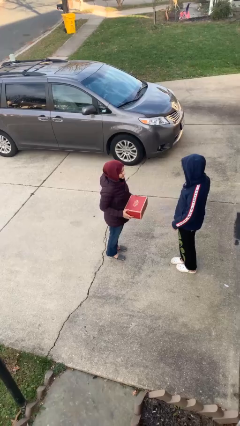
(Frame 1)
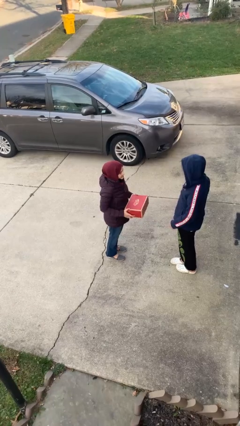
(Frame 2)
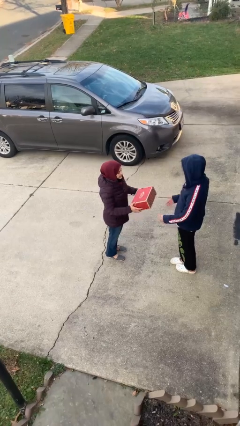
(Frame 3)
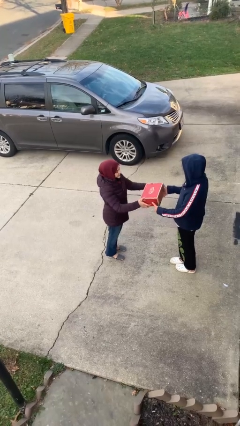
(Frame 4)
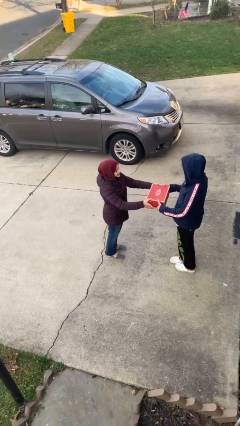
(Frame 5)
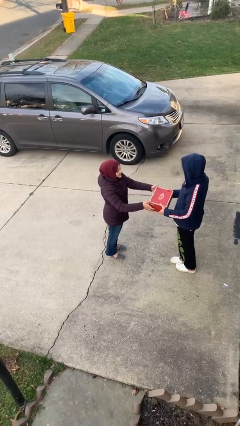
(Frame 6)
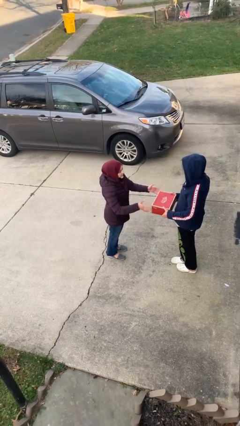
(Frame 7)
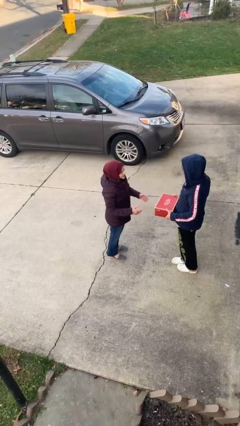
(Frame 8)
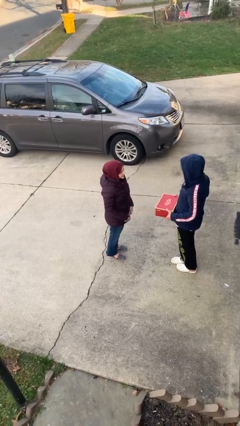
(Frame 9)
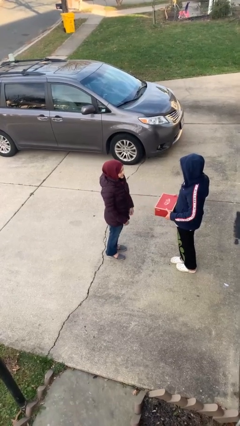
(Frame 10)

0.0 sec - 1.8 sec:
person transfers object to person

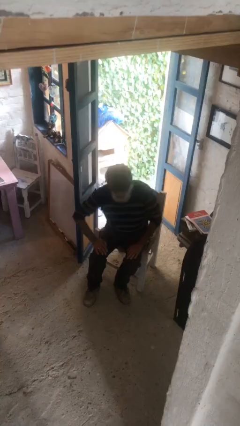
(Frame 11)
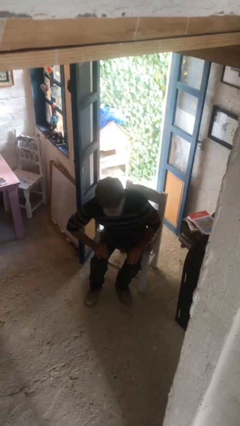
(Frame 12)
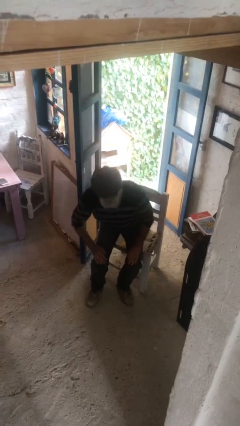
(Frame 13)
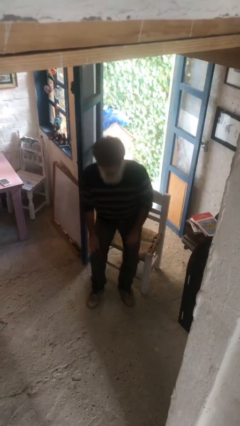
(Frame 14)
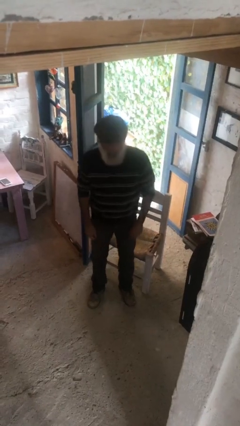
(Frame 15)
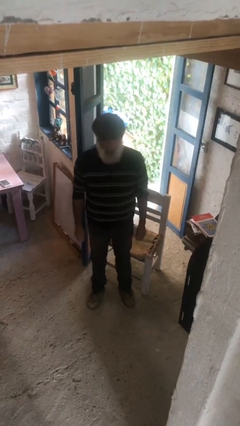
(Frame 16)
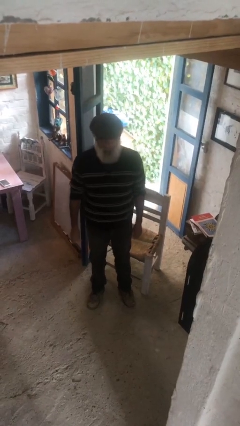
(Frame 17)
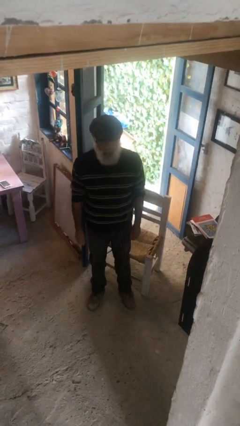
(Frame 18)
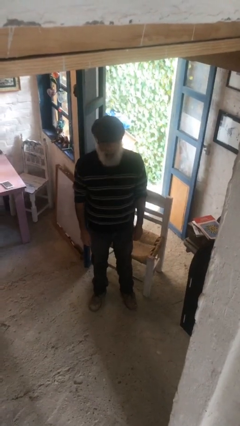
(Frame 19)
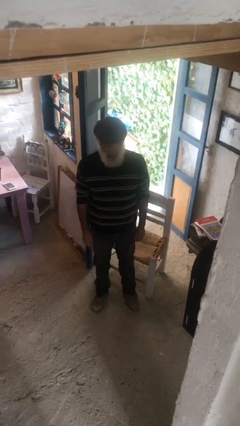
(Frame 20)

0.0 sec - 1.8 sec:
person stands up

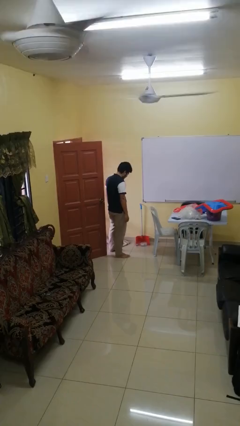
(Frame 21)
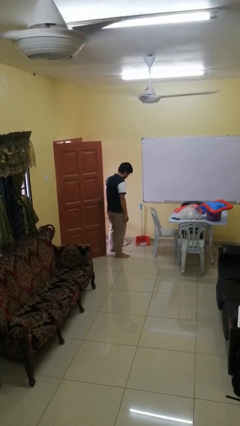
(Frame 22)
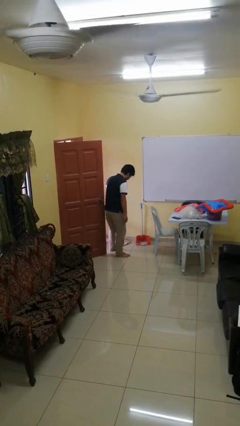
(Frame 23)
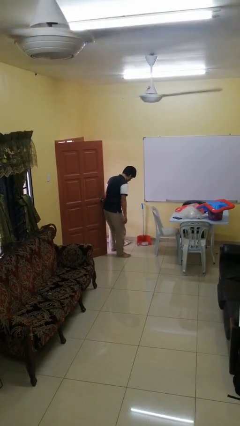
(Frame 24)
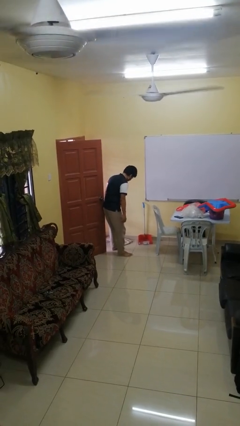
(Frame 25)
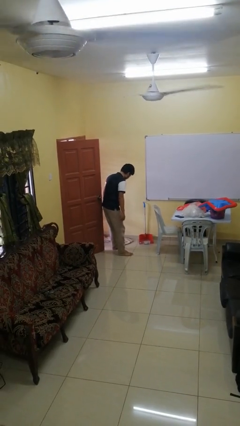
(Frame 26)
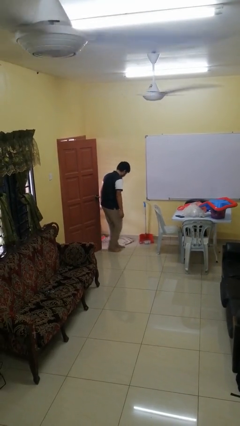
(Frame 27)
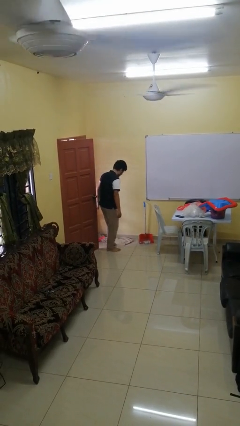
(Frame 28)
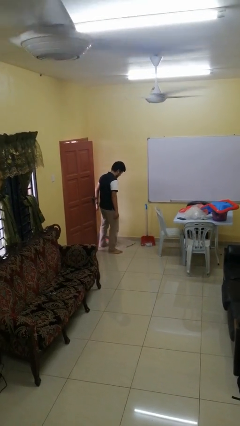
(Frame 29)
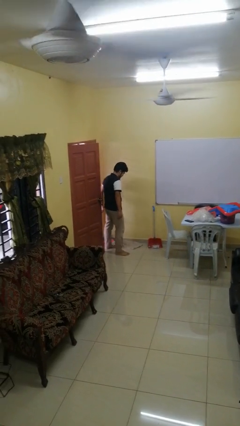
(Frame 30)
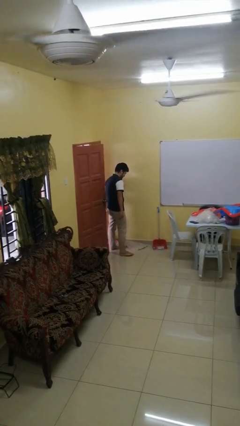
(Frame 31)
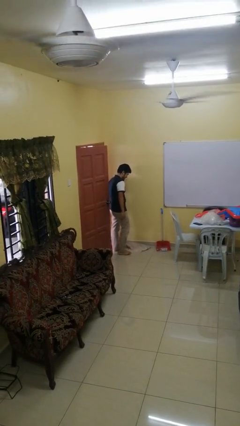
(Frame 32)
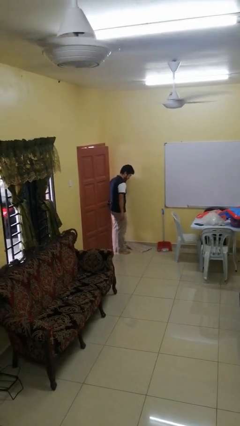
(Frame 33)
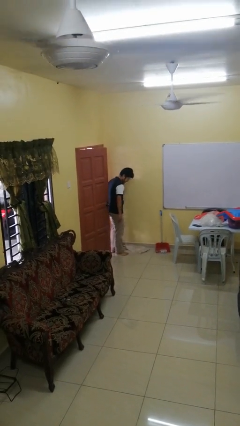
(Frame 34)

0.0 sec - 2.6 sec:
person closes door with hip

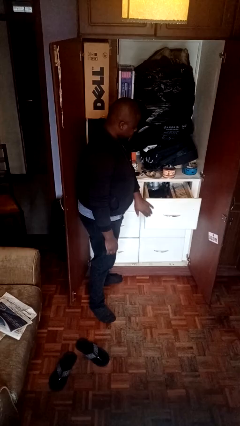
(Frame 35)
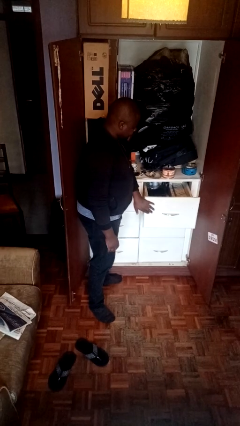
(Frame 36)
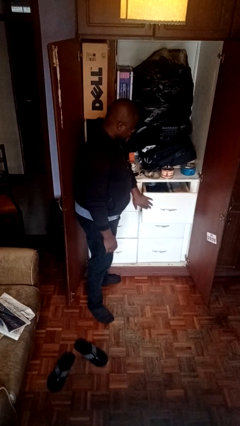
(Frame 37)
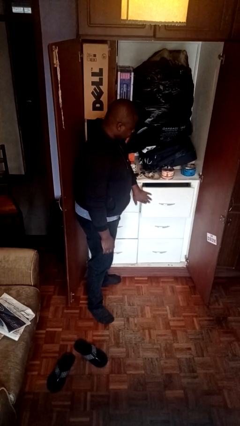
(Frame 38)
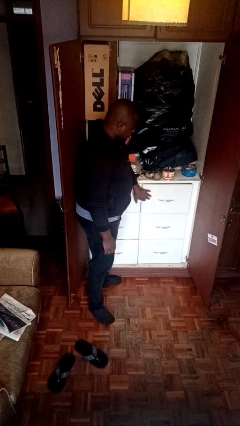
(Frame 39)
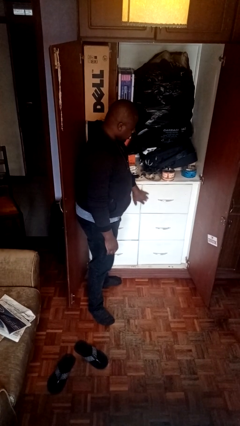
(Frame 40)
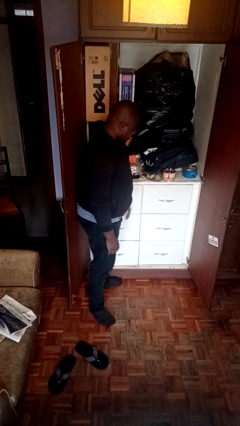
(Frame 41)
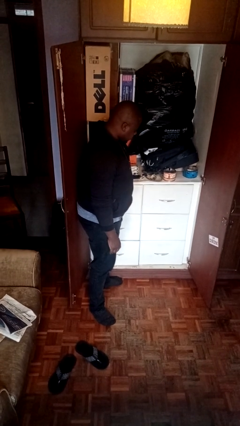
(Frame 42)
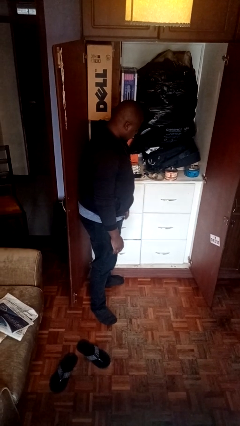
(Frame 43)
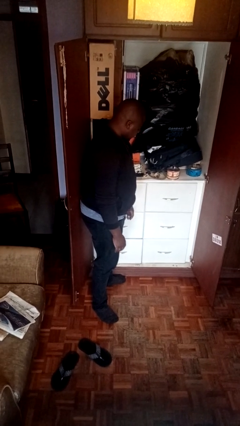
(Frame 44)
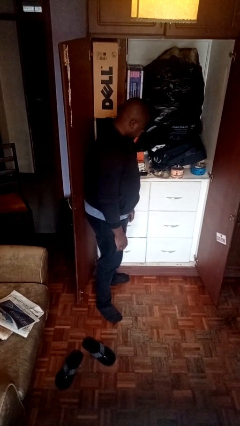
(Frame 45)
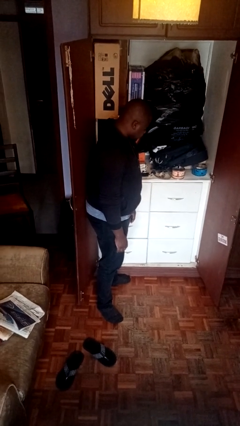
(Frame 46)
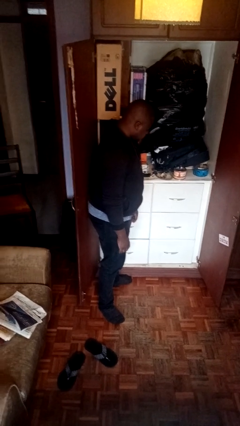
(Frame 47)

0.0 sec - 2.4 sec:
person closes dresser drawer

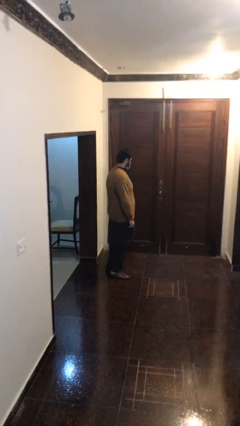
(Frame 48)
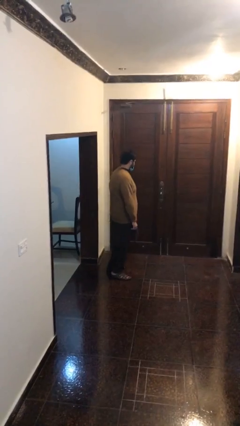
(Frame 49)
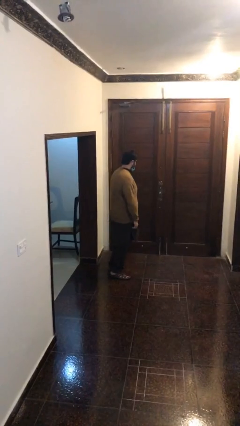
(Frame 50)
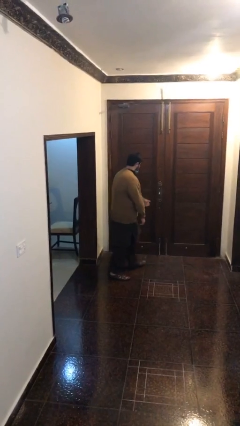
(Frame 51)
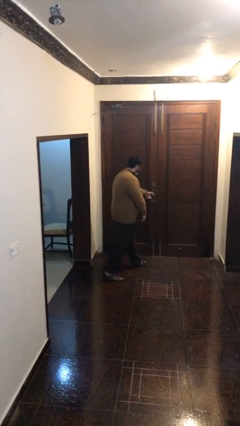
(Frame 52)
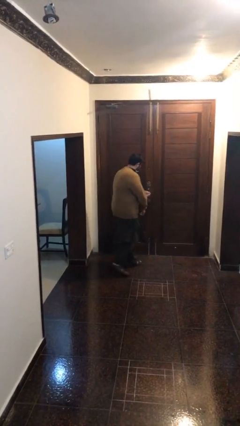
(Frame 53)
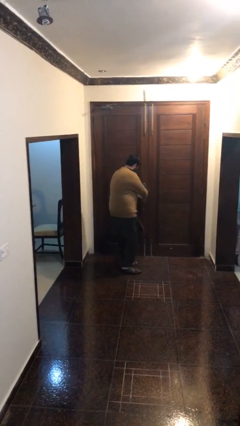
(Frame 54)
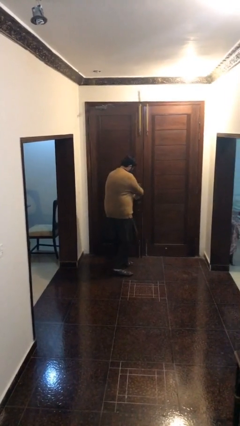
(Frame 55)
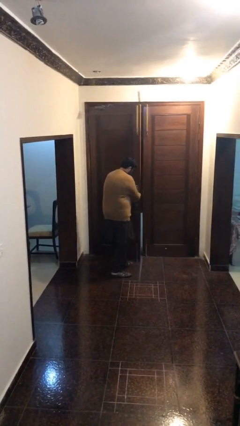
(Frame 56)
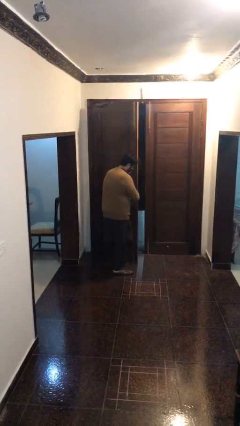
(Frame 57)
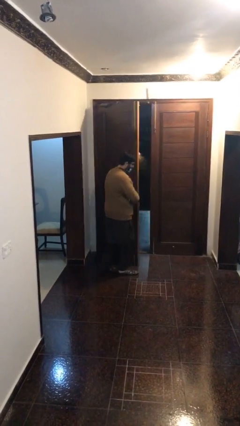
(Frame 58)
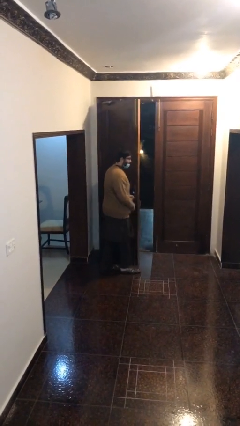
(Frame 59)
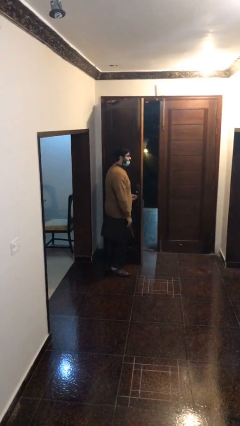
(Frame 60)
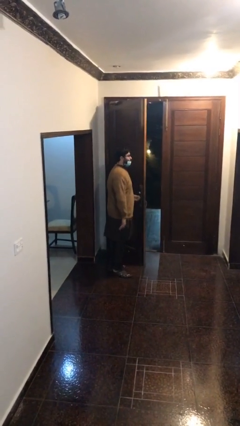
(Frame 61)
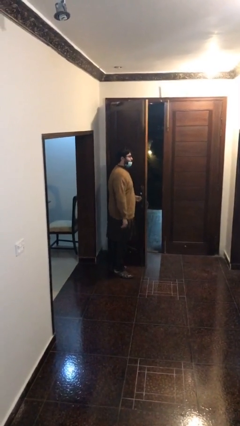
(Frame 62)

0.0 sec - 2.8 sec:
person opens facility door

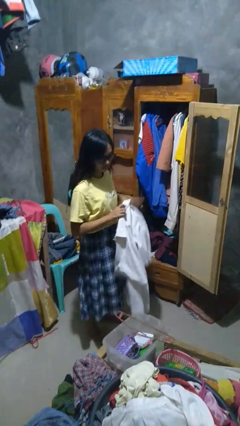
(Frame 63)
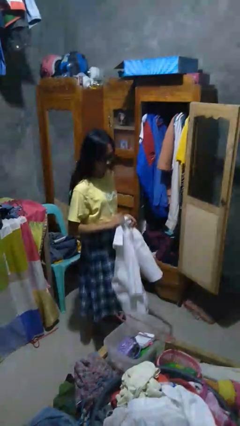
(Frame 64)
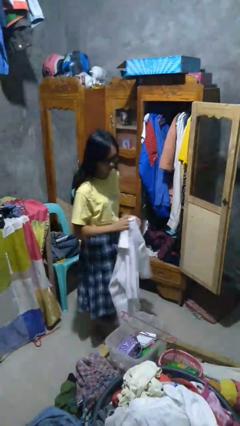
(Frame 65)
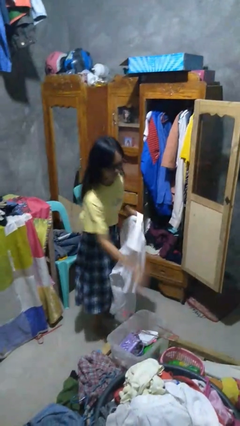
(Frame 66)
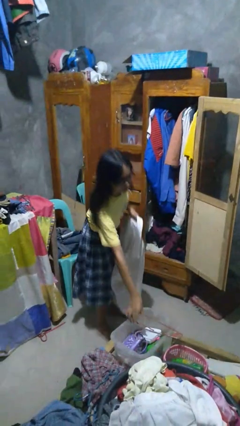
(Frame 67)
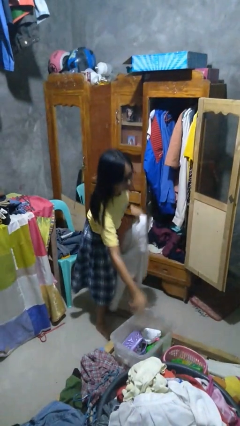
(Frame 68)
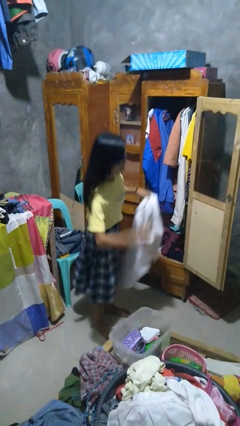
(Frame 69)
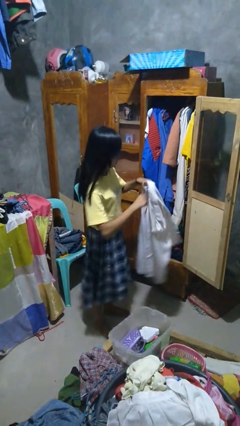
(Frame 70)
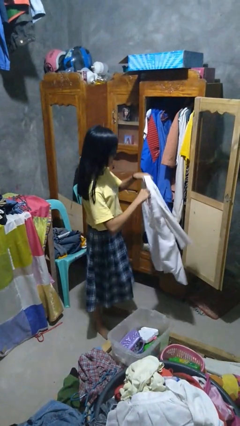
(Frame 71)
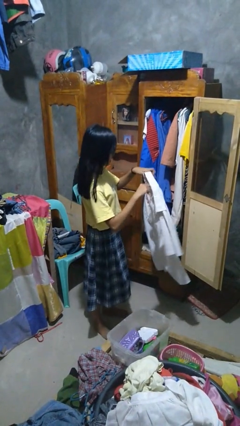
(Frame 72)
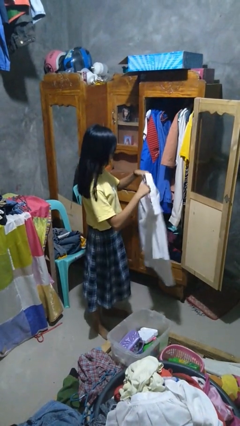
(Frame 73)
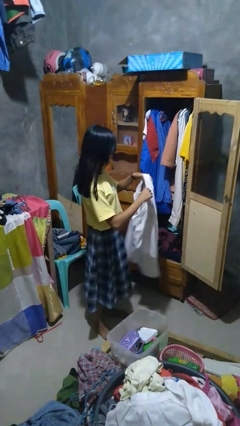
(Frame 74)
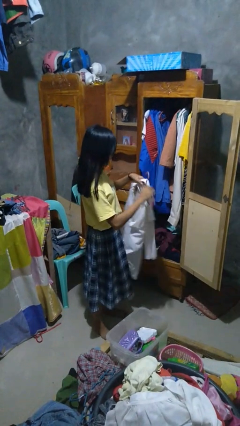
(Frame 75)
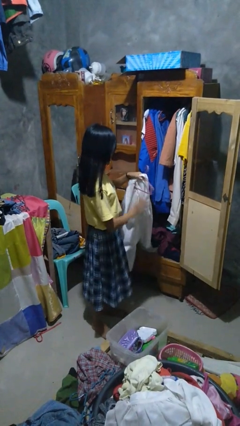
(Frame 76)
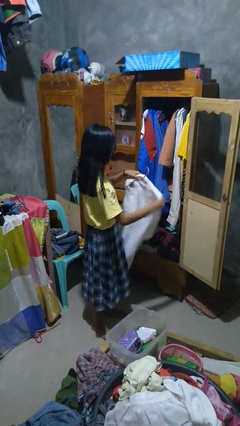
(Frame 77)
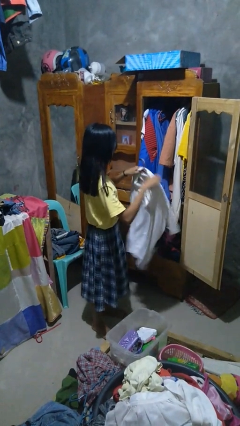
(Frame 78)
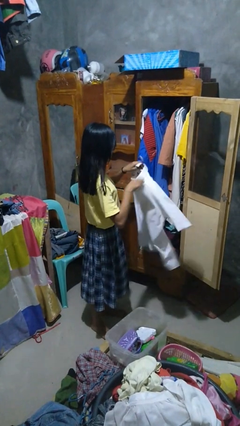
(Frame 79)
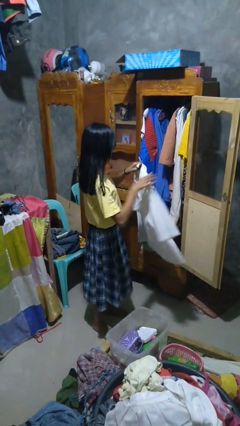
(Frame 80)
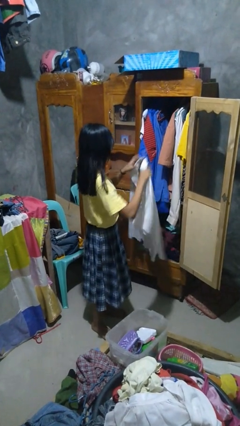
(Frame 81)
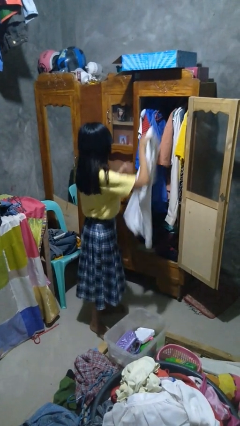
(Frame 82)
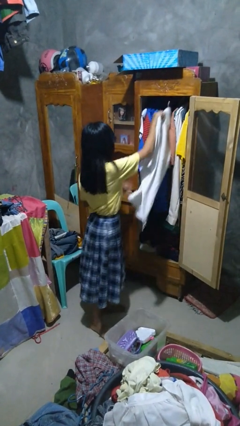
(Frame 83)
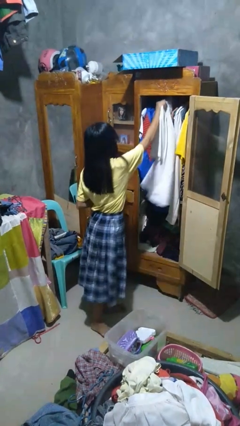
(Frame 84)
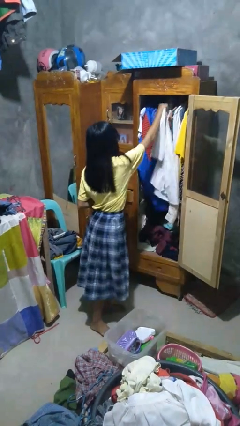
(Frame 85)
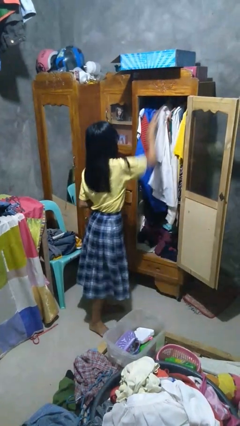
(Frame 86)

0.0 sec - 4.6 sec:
person puts clothes into closet

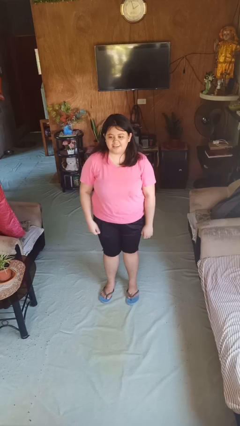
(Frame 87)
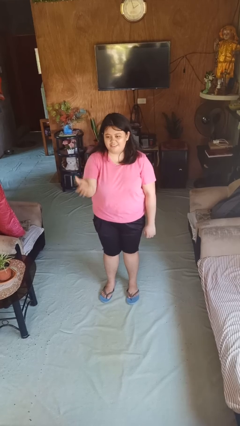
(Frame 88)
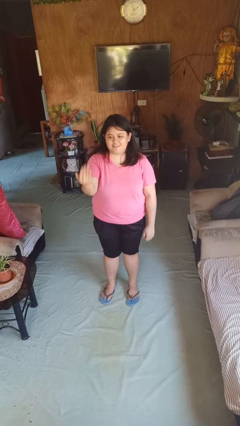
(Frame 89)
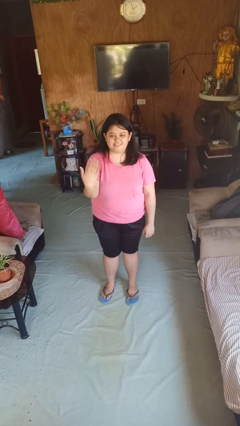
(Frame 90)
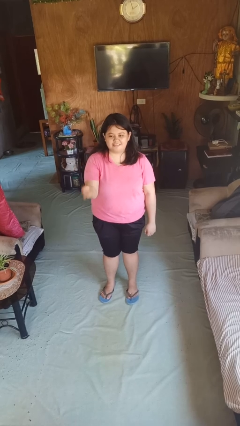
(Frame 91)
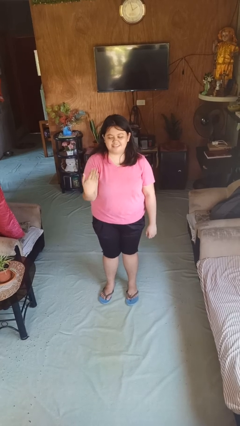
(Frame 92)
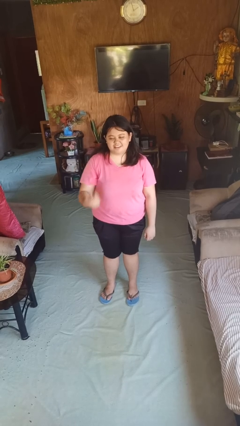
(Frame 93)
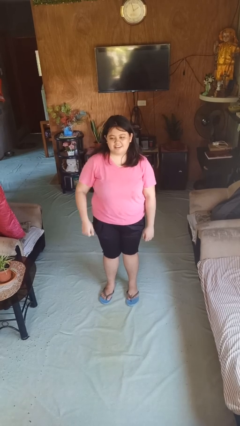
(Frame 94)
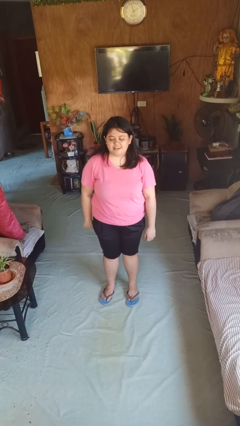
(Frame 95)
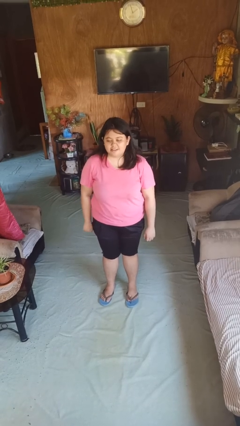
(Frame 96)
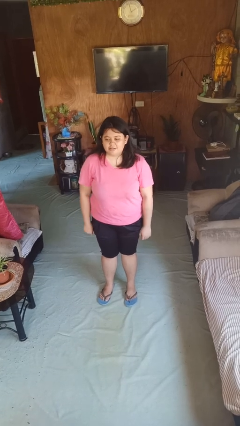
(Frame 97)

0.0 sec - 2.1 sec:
person gestures come here
